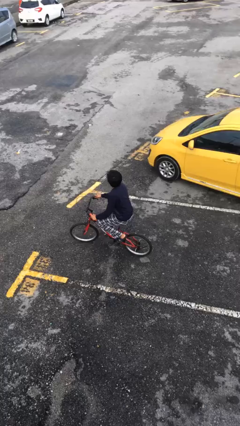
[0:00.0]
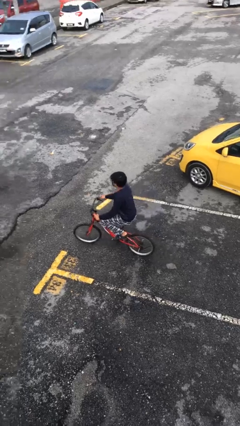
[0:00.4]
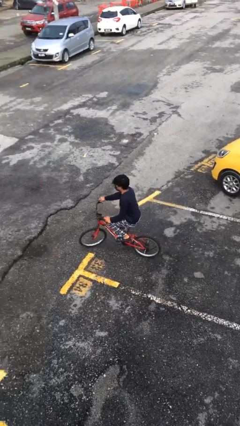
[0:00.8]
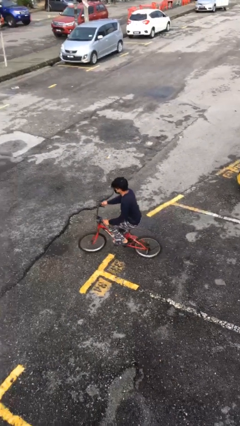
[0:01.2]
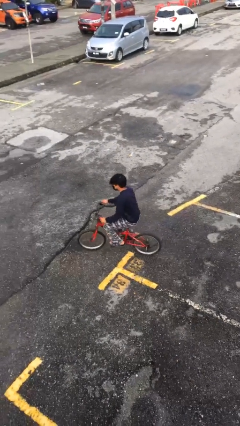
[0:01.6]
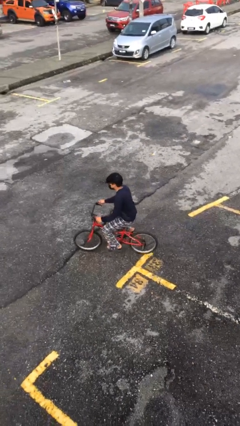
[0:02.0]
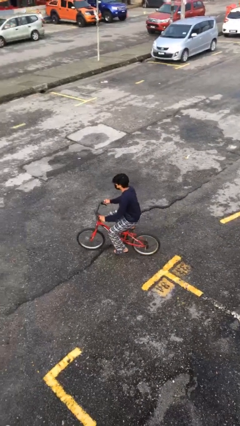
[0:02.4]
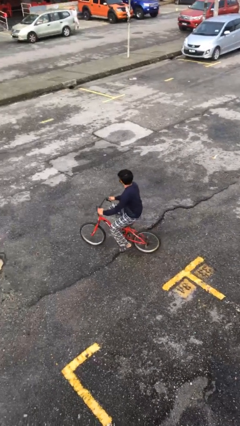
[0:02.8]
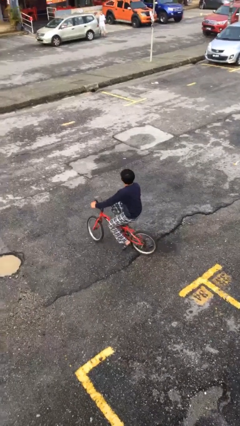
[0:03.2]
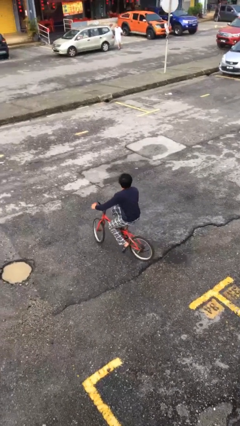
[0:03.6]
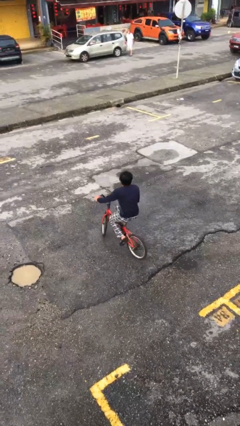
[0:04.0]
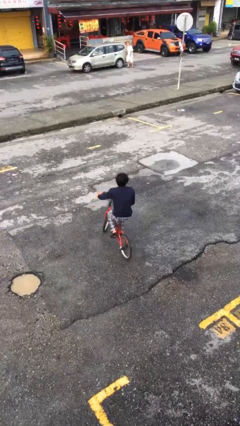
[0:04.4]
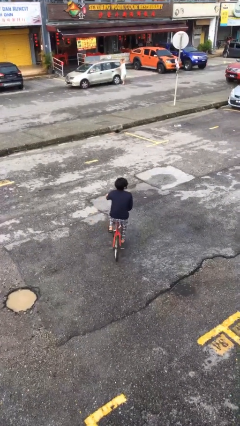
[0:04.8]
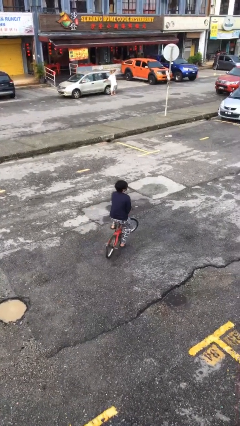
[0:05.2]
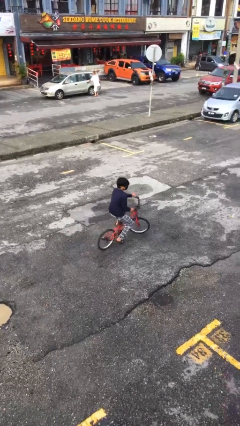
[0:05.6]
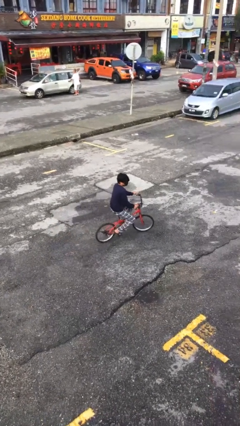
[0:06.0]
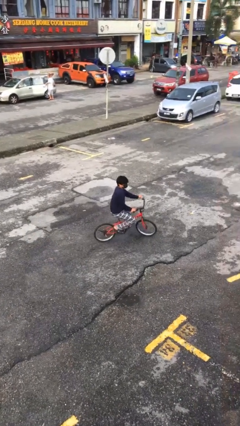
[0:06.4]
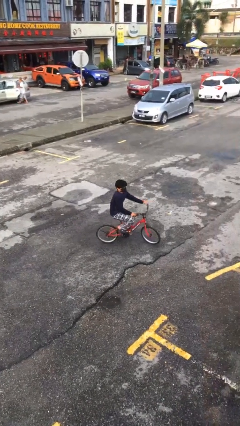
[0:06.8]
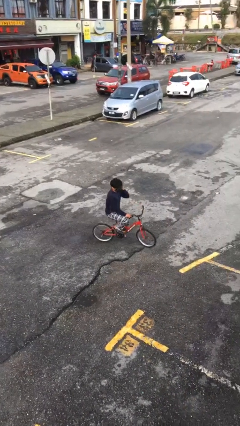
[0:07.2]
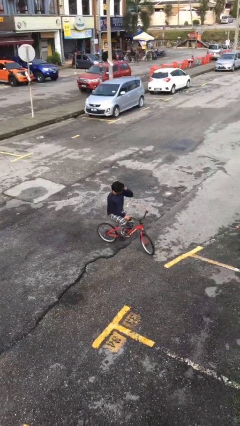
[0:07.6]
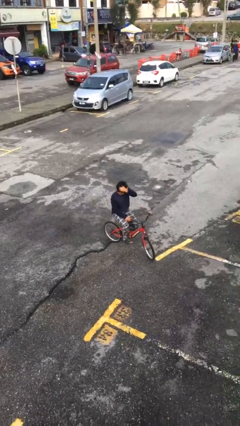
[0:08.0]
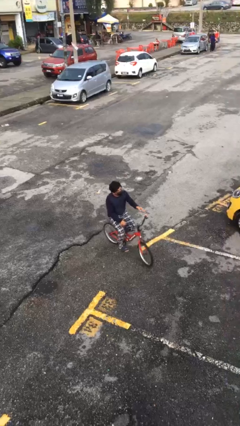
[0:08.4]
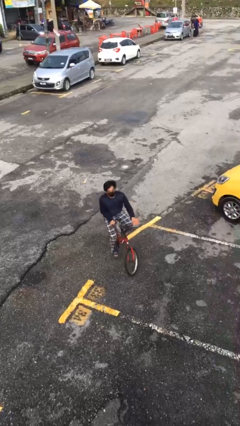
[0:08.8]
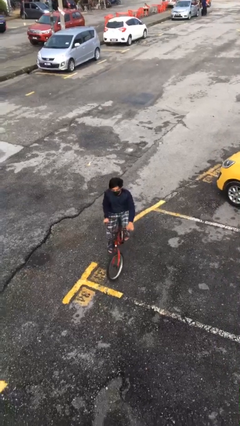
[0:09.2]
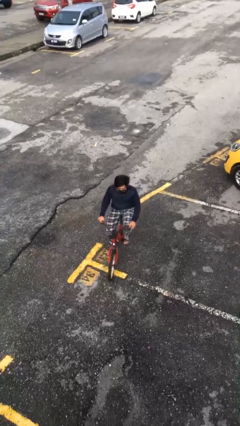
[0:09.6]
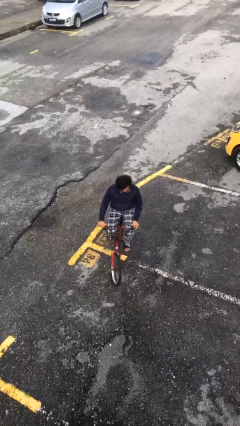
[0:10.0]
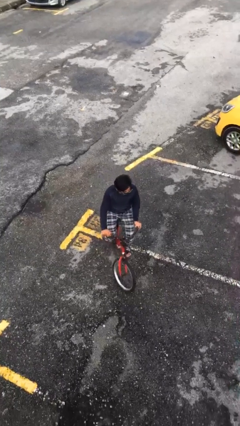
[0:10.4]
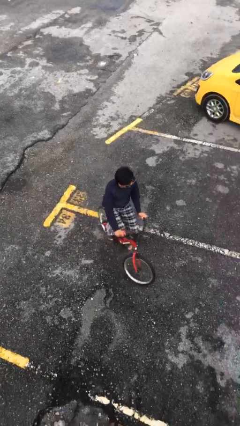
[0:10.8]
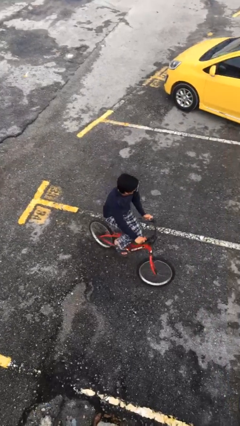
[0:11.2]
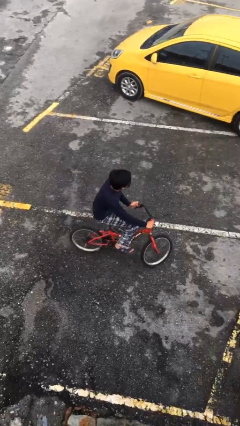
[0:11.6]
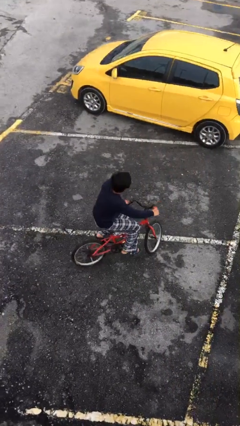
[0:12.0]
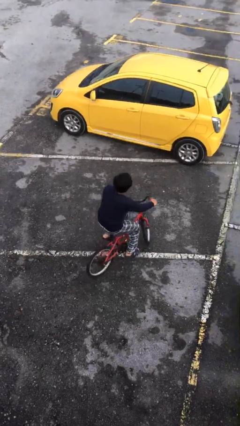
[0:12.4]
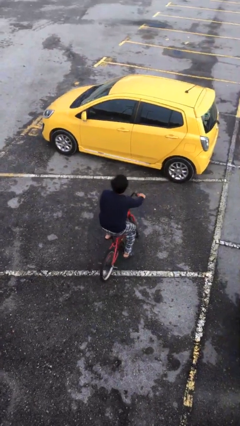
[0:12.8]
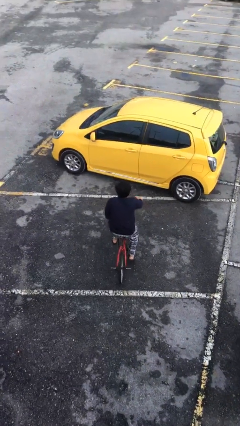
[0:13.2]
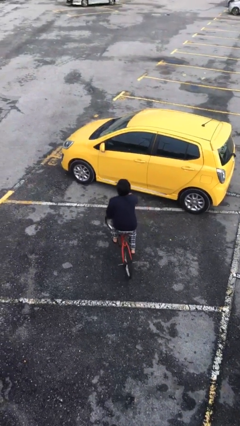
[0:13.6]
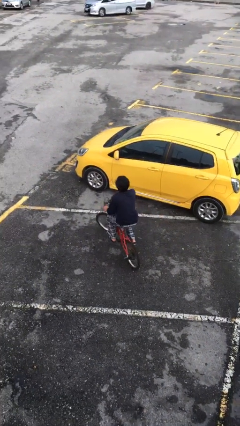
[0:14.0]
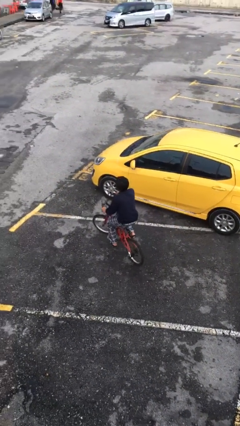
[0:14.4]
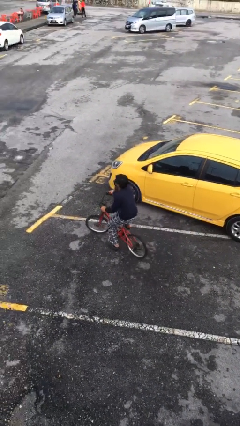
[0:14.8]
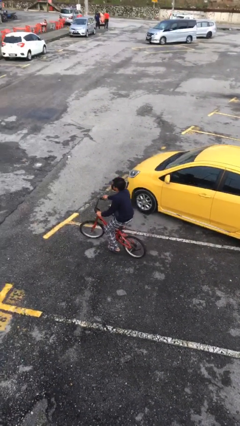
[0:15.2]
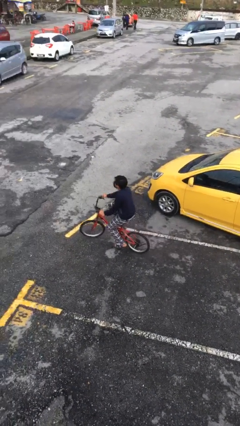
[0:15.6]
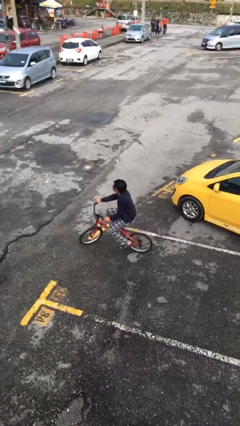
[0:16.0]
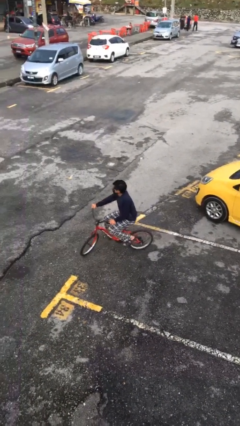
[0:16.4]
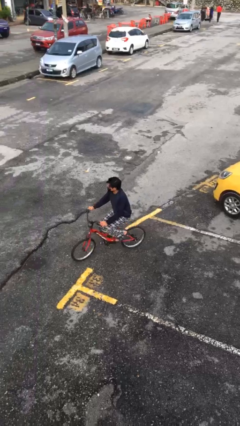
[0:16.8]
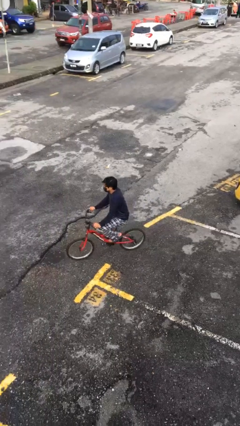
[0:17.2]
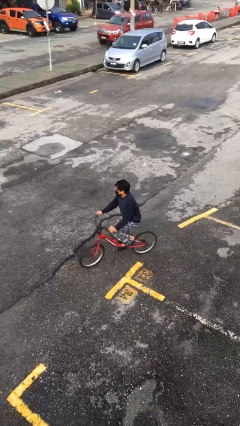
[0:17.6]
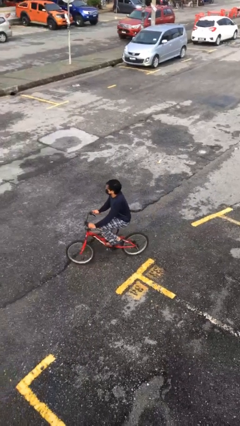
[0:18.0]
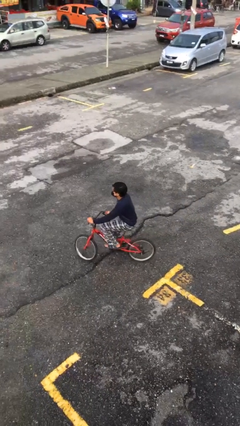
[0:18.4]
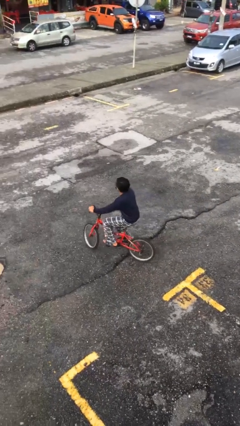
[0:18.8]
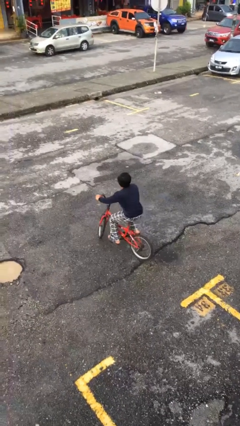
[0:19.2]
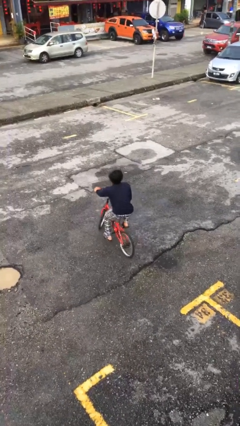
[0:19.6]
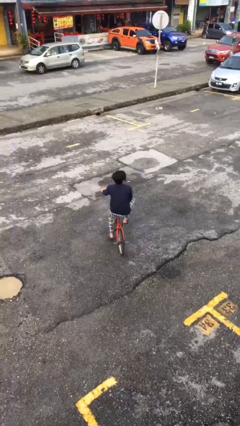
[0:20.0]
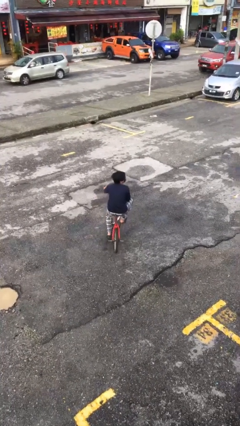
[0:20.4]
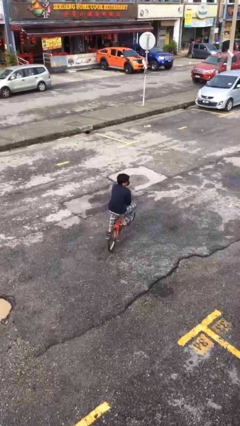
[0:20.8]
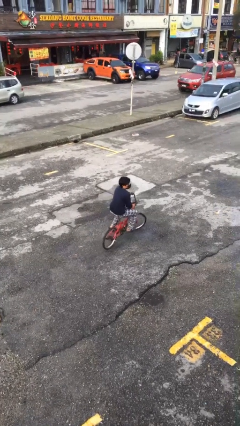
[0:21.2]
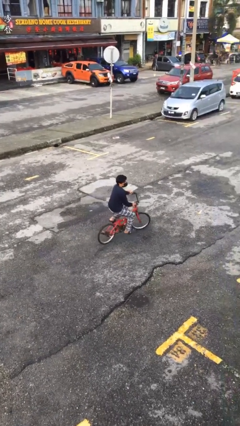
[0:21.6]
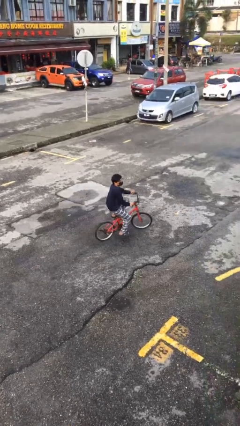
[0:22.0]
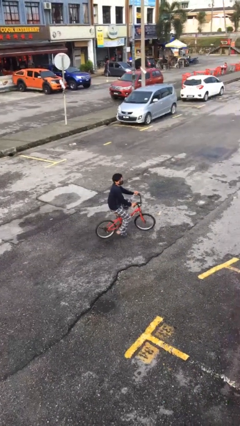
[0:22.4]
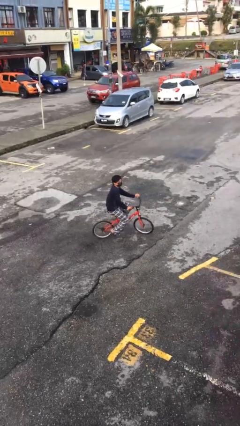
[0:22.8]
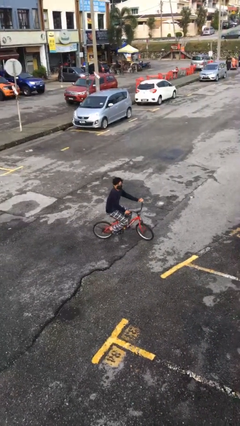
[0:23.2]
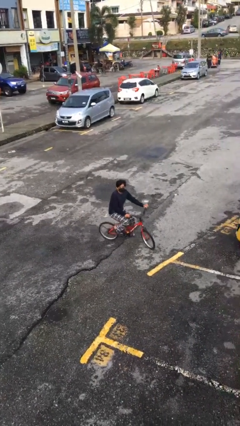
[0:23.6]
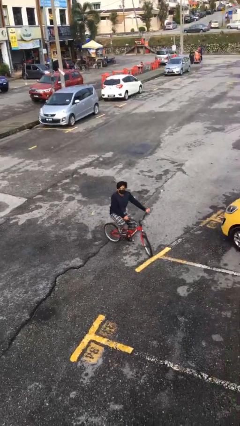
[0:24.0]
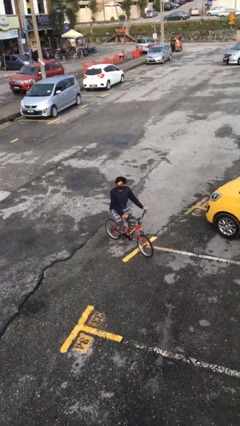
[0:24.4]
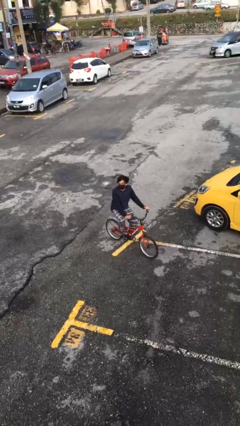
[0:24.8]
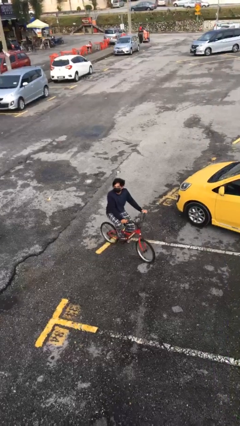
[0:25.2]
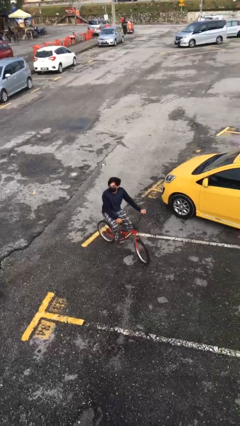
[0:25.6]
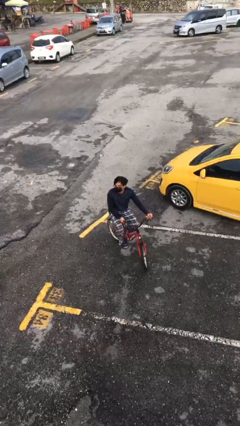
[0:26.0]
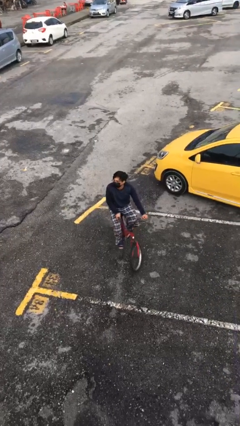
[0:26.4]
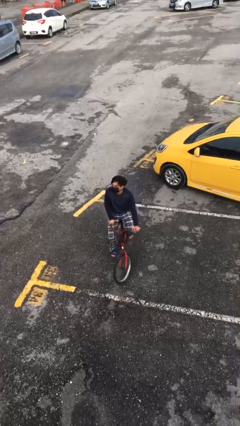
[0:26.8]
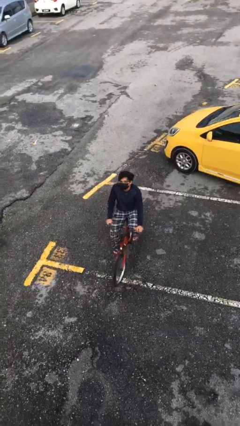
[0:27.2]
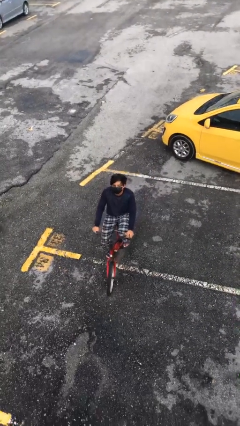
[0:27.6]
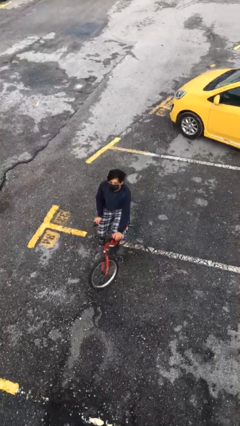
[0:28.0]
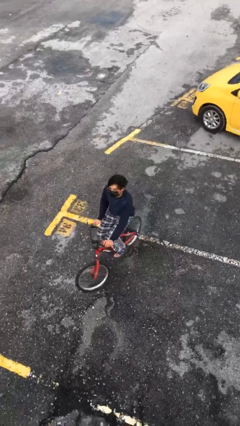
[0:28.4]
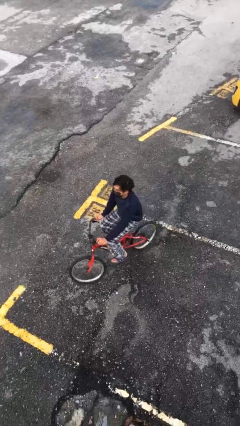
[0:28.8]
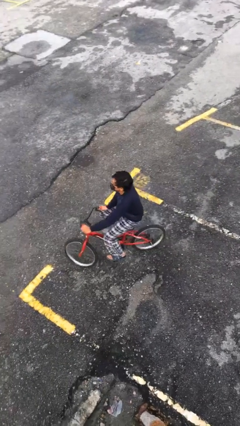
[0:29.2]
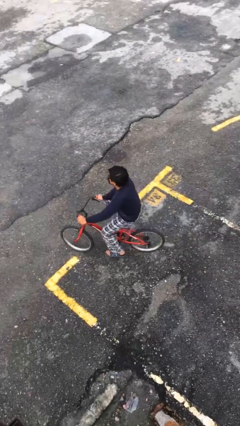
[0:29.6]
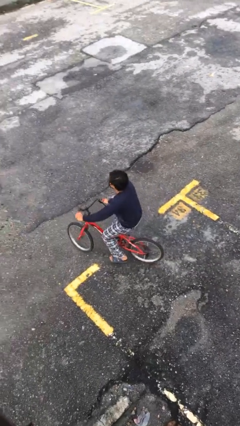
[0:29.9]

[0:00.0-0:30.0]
person rides bicycle

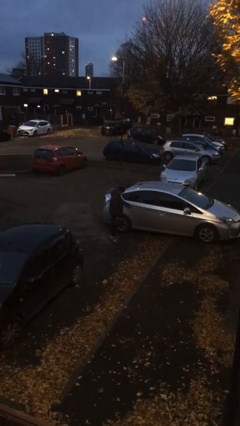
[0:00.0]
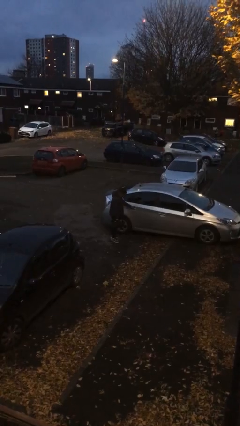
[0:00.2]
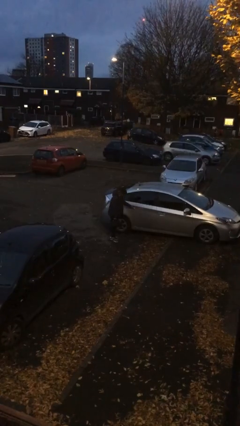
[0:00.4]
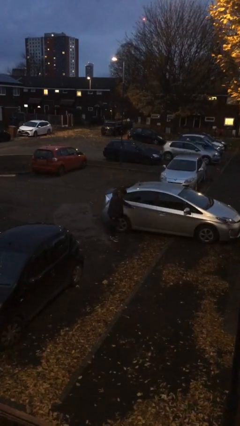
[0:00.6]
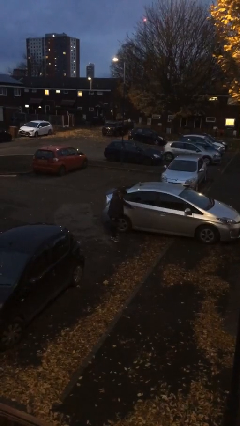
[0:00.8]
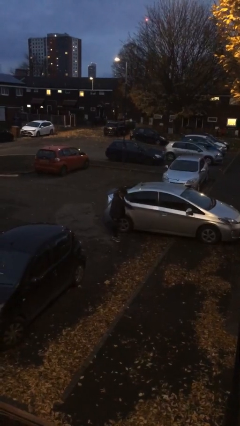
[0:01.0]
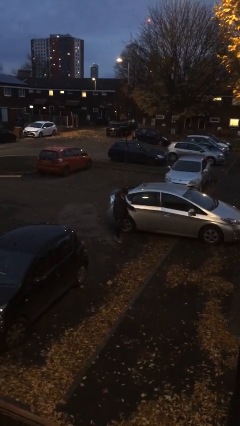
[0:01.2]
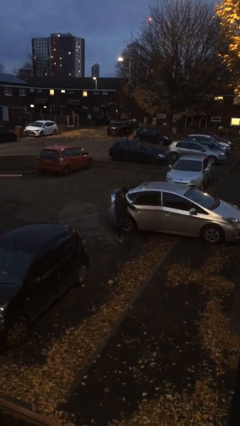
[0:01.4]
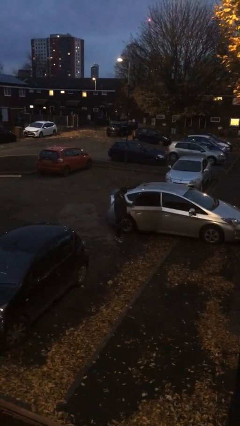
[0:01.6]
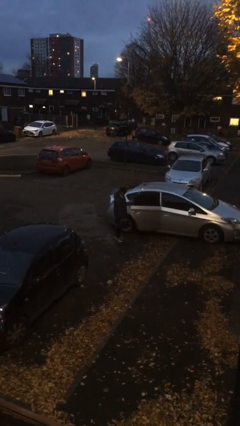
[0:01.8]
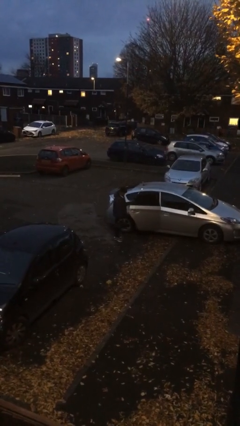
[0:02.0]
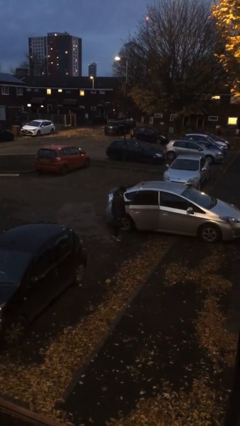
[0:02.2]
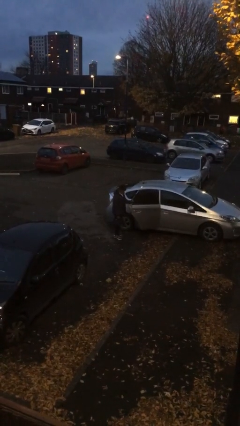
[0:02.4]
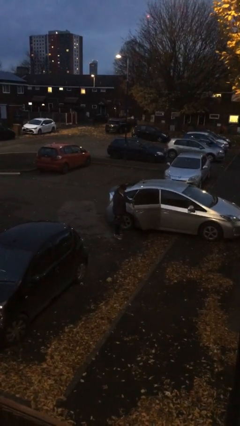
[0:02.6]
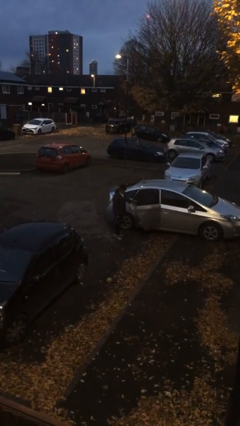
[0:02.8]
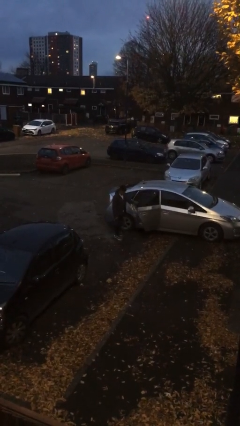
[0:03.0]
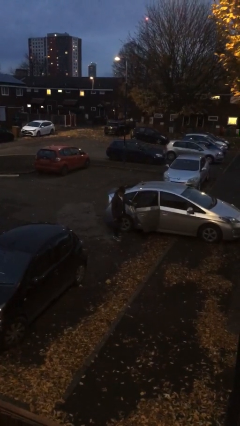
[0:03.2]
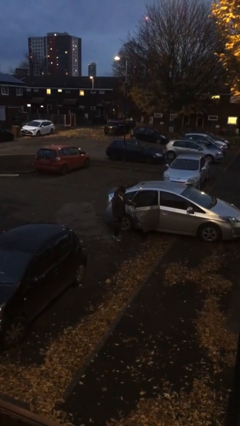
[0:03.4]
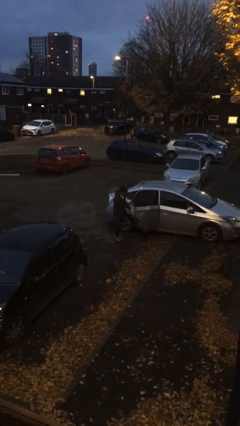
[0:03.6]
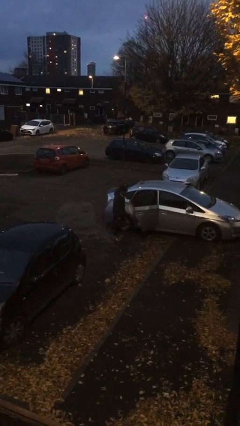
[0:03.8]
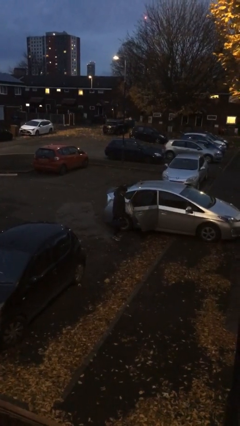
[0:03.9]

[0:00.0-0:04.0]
person opens car door
